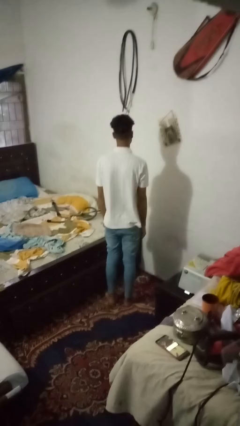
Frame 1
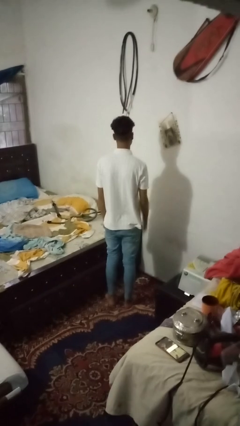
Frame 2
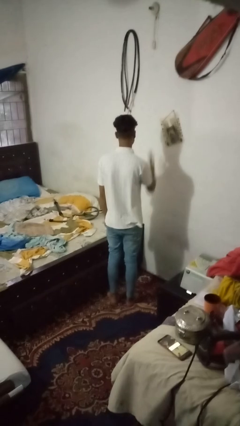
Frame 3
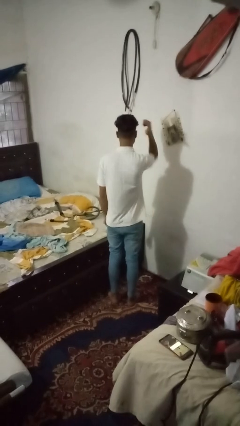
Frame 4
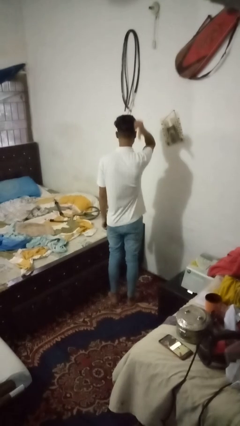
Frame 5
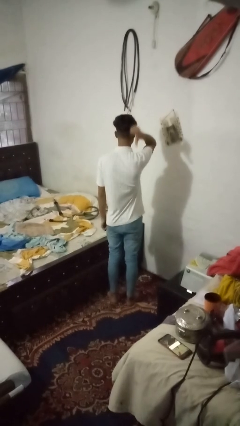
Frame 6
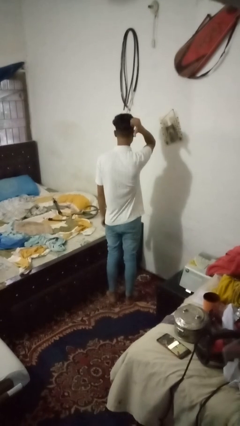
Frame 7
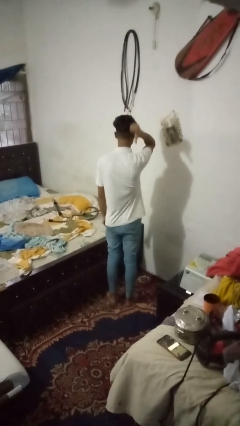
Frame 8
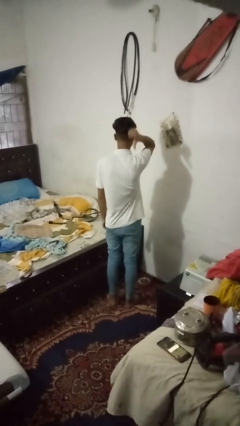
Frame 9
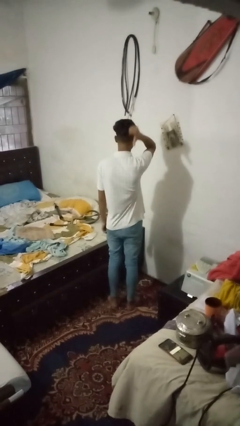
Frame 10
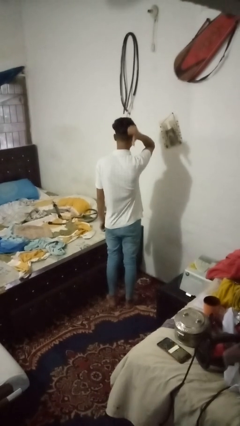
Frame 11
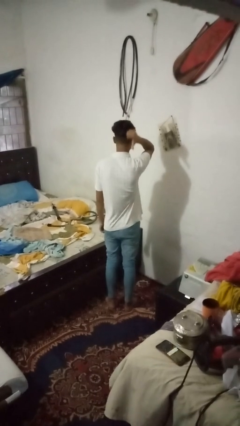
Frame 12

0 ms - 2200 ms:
person gestures behind me

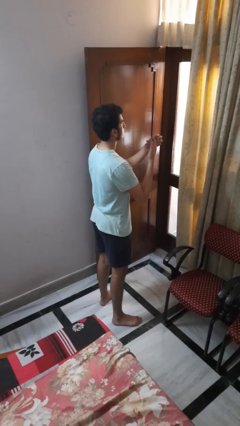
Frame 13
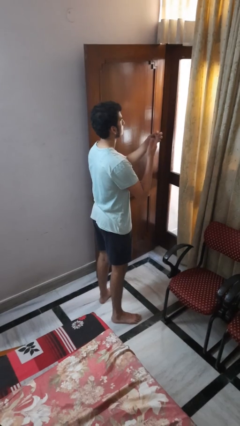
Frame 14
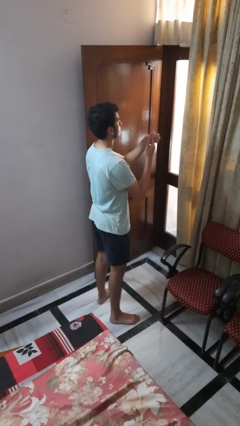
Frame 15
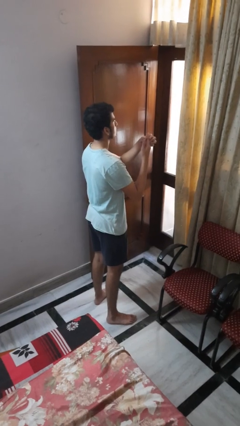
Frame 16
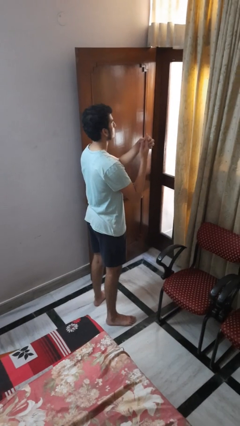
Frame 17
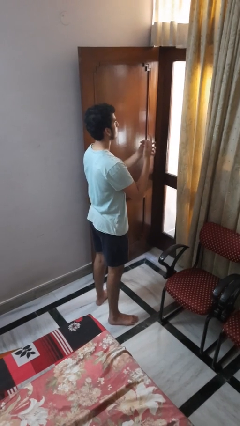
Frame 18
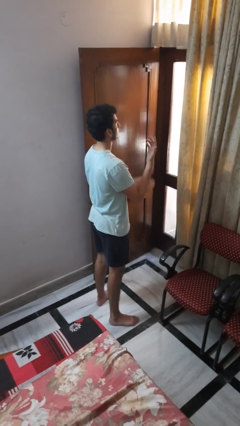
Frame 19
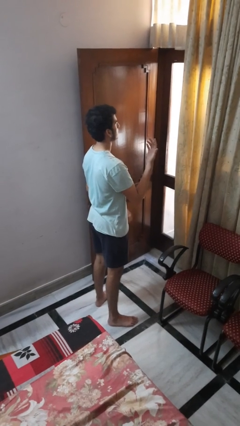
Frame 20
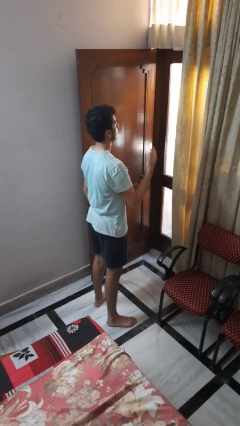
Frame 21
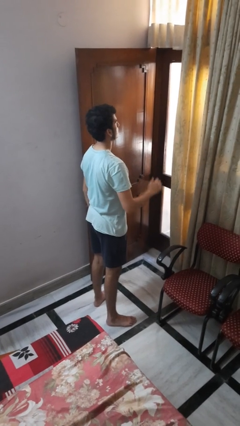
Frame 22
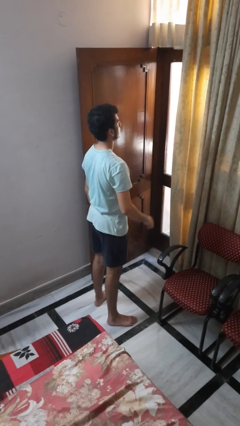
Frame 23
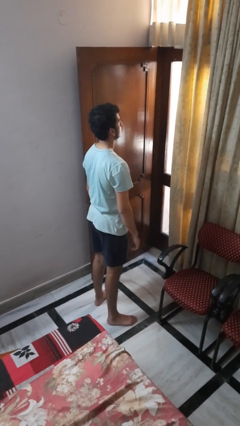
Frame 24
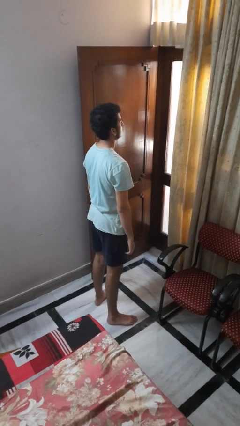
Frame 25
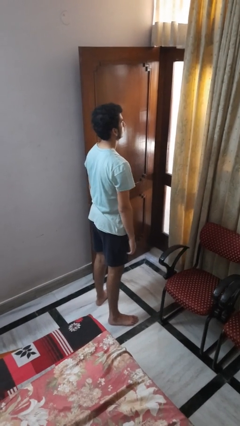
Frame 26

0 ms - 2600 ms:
person puts on ring

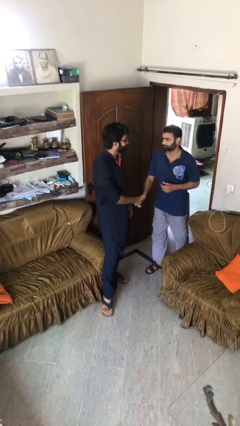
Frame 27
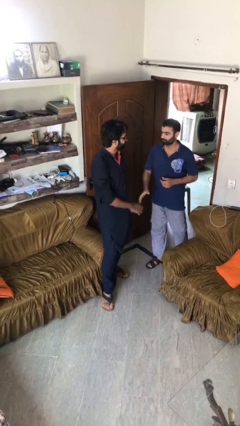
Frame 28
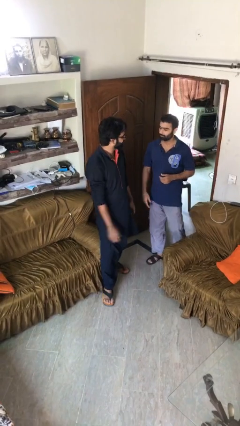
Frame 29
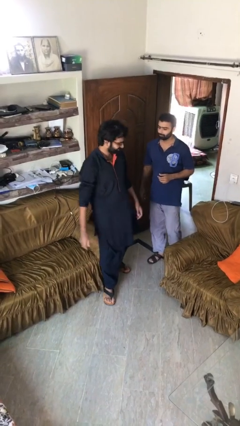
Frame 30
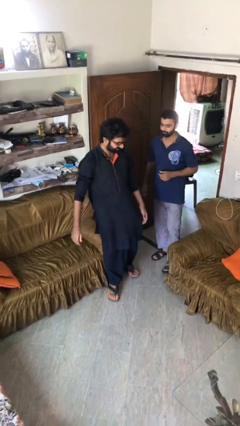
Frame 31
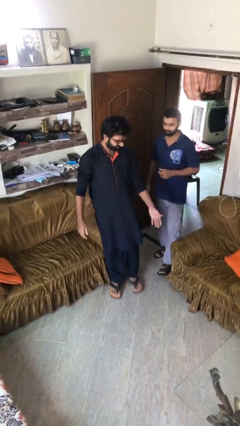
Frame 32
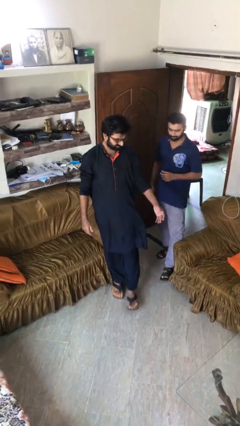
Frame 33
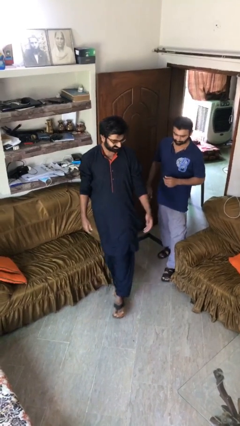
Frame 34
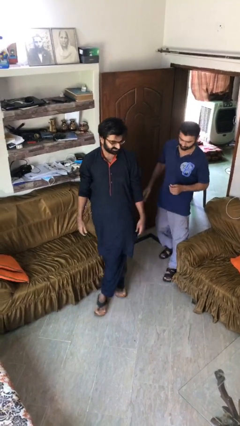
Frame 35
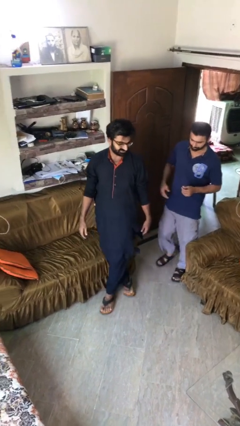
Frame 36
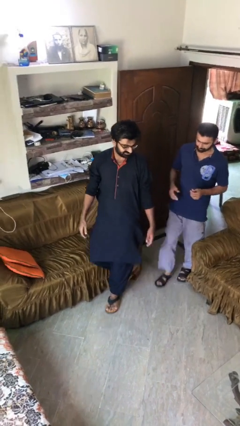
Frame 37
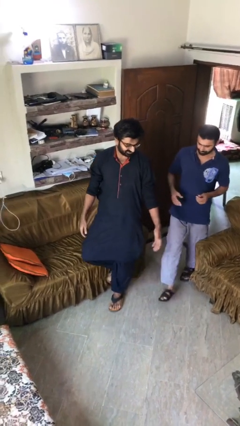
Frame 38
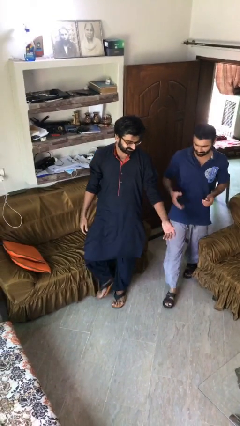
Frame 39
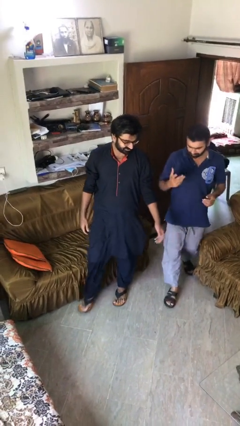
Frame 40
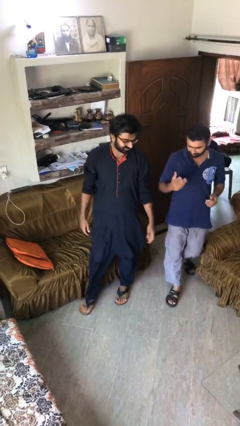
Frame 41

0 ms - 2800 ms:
person talks to person

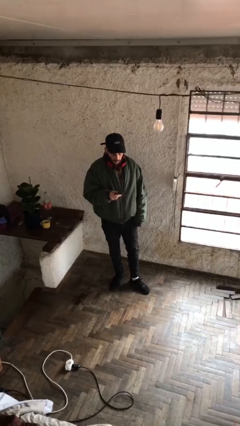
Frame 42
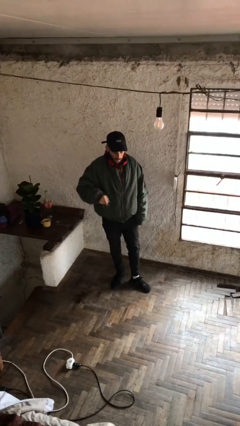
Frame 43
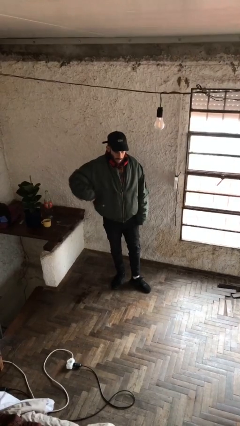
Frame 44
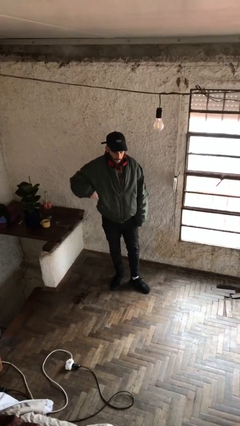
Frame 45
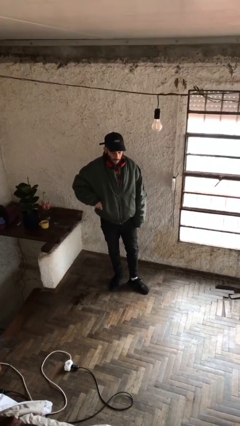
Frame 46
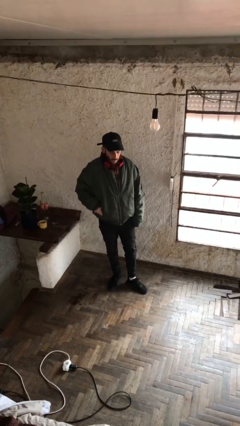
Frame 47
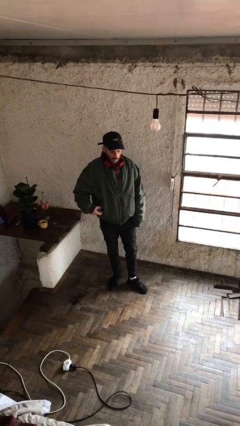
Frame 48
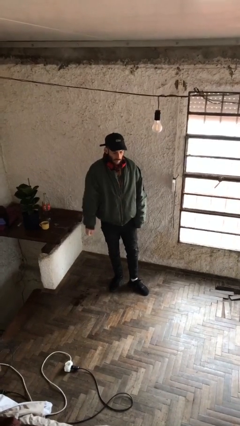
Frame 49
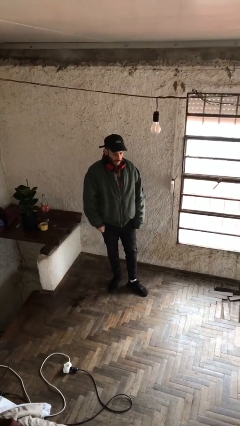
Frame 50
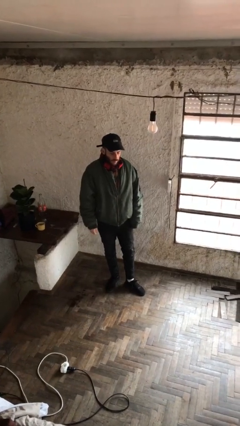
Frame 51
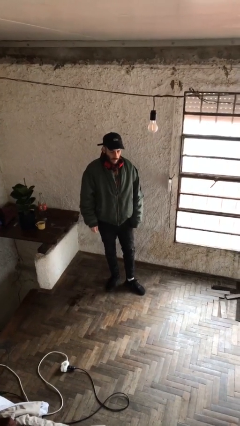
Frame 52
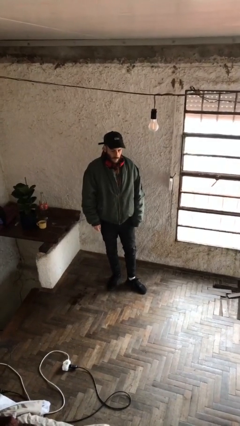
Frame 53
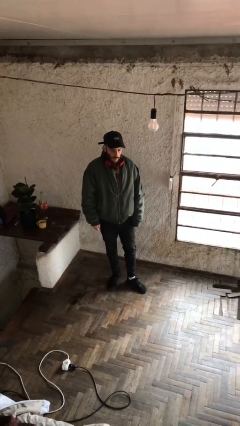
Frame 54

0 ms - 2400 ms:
person puts phone into pocket

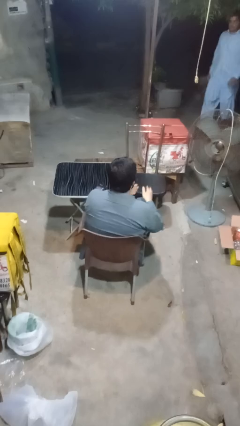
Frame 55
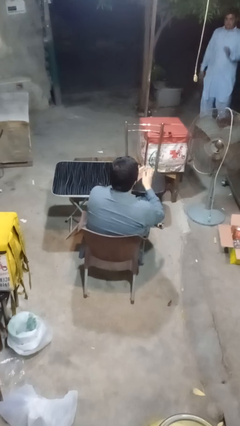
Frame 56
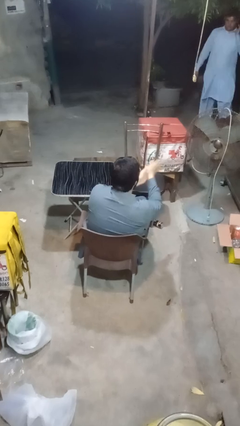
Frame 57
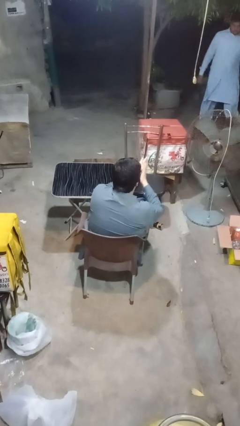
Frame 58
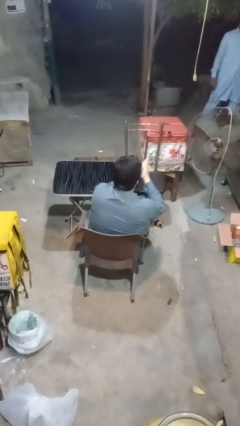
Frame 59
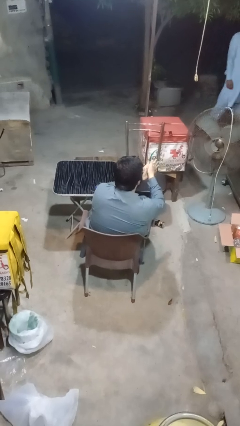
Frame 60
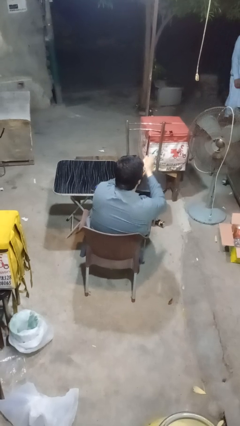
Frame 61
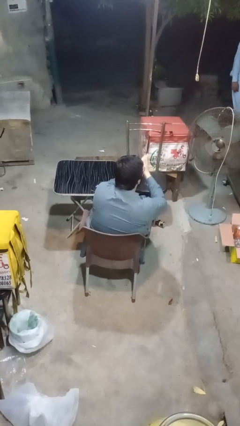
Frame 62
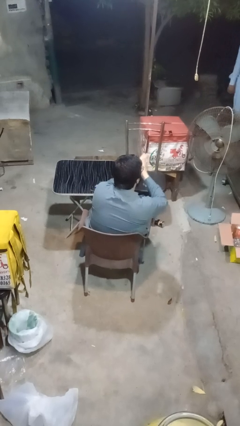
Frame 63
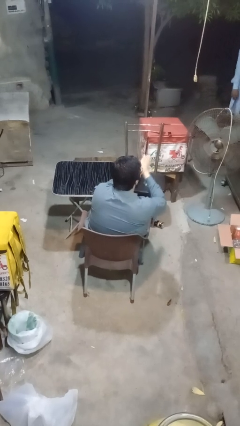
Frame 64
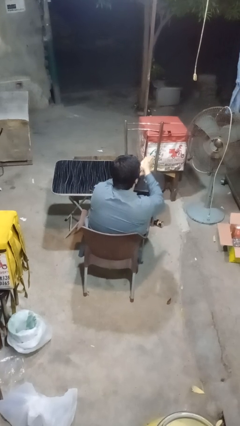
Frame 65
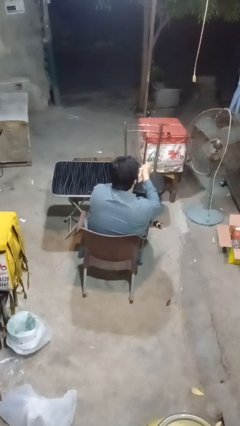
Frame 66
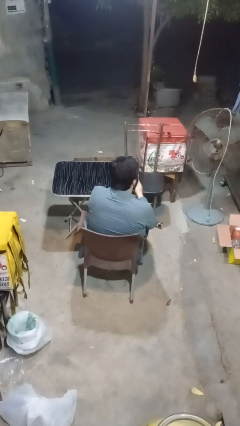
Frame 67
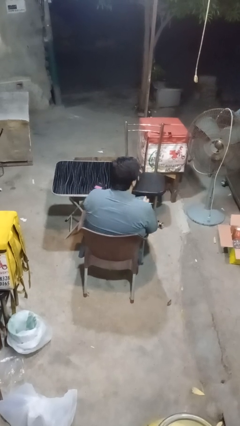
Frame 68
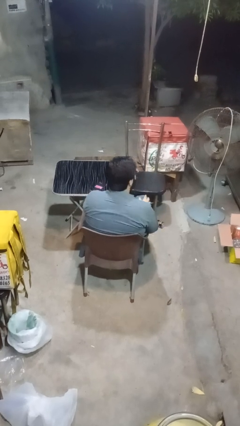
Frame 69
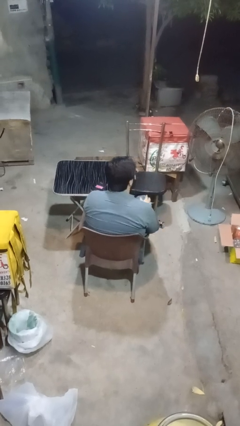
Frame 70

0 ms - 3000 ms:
person blows into hands

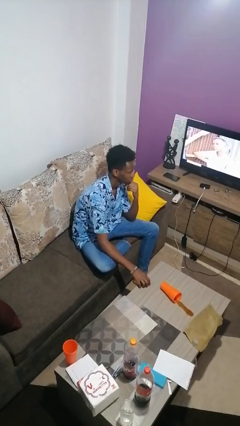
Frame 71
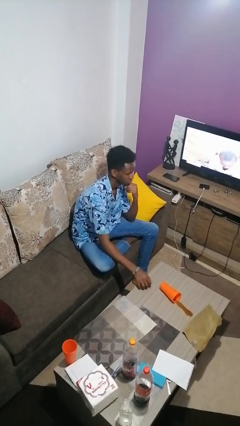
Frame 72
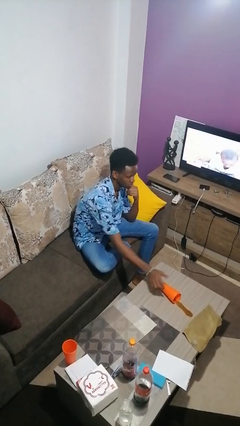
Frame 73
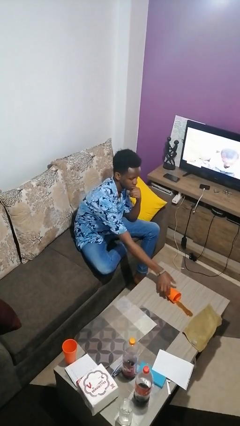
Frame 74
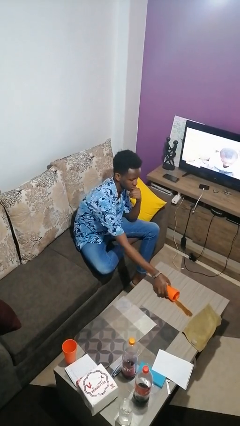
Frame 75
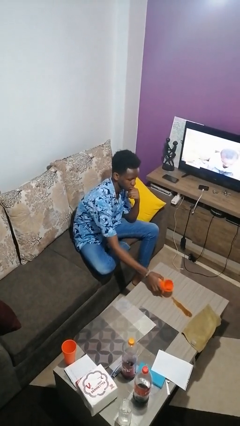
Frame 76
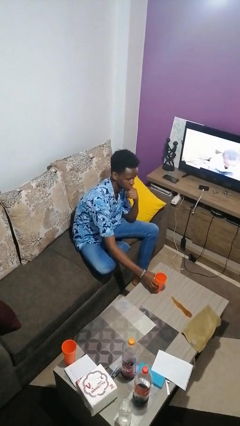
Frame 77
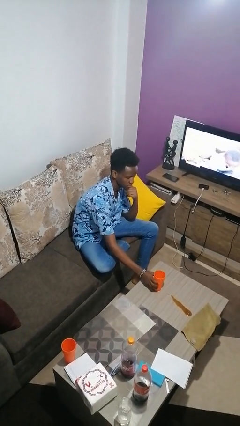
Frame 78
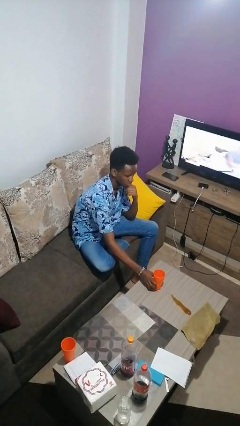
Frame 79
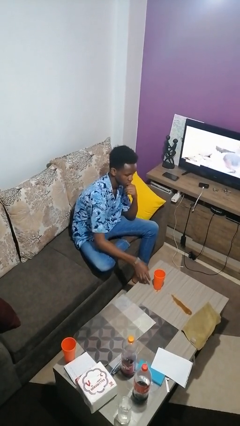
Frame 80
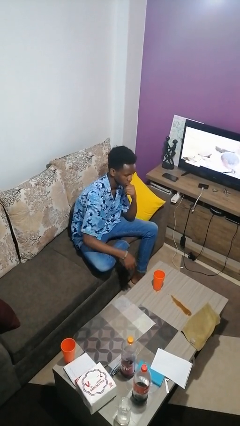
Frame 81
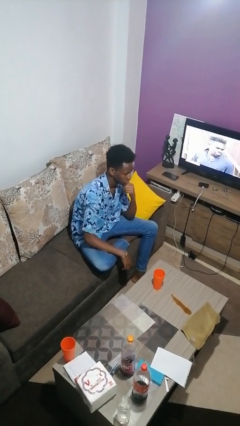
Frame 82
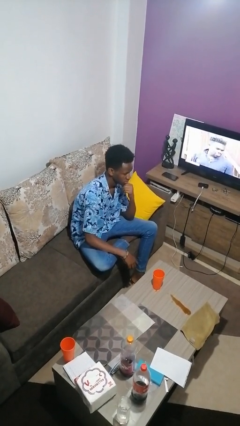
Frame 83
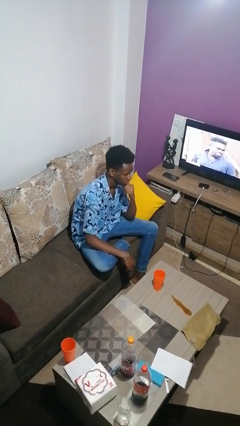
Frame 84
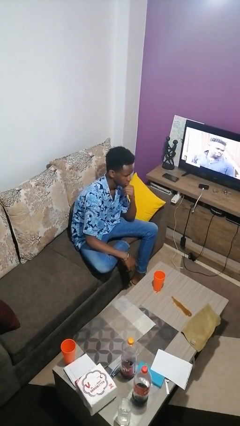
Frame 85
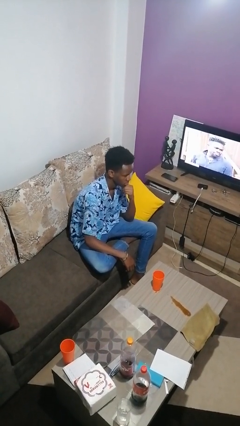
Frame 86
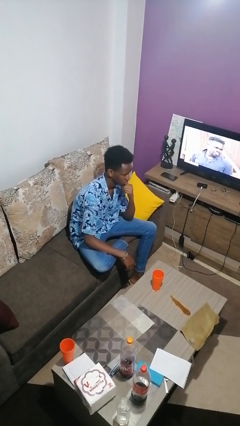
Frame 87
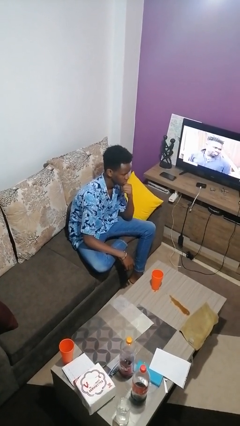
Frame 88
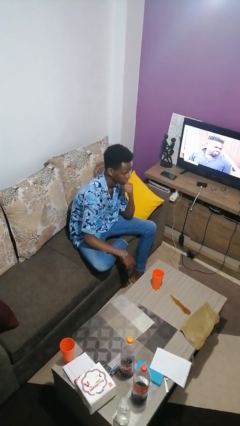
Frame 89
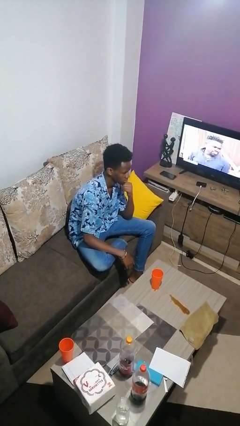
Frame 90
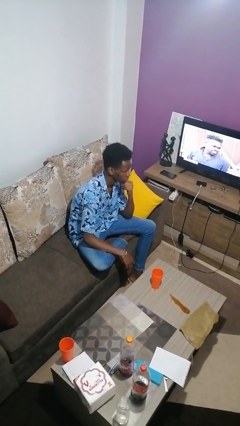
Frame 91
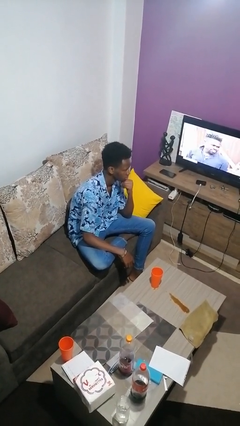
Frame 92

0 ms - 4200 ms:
person sets upright glass

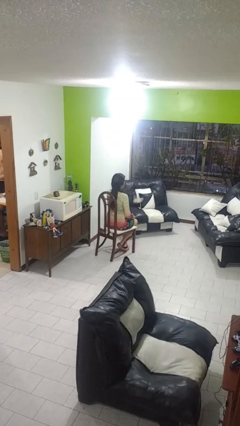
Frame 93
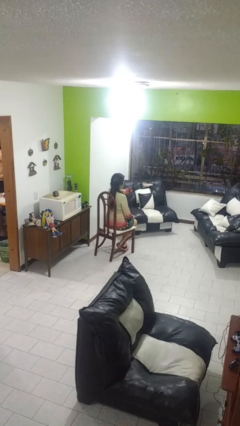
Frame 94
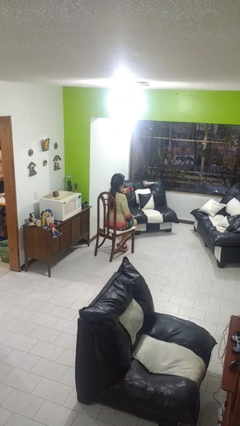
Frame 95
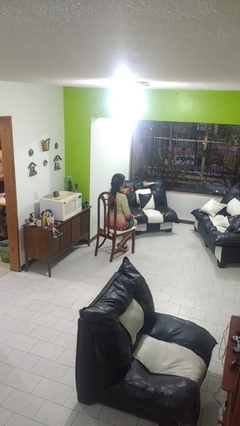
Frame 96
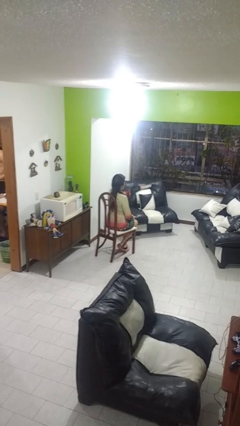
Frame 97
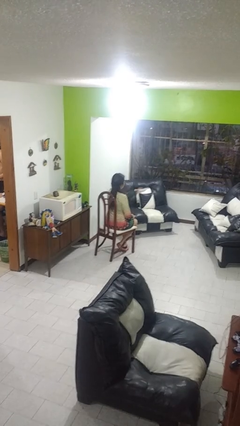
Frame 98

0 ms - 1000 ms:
person uses television remote
